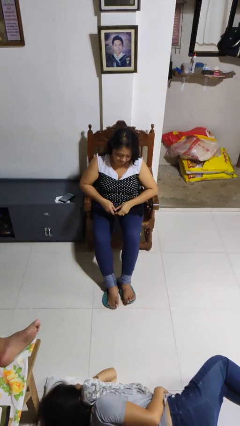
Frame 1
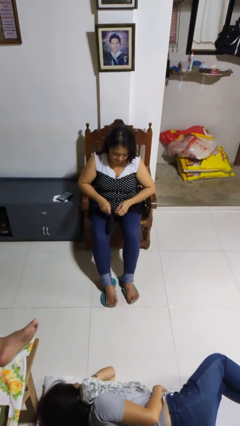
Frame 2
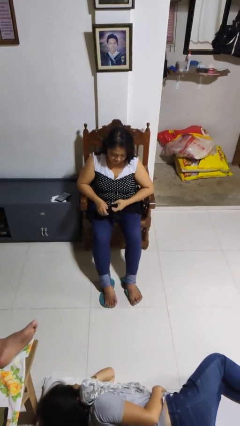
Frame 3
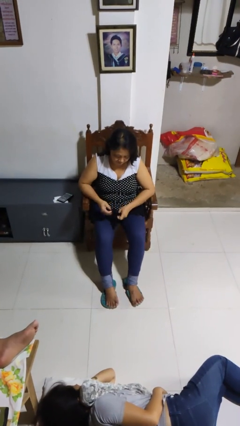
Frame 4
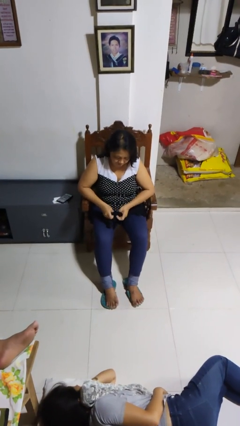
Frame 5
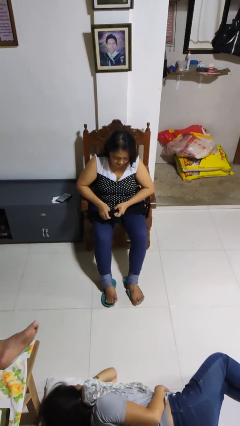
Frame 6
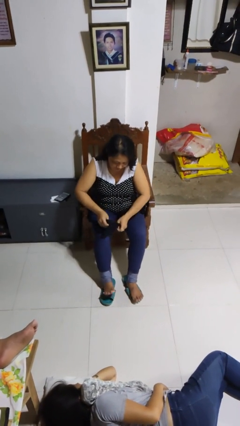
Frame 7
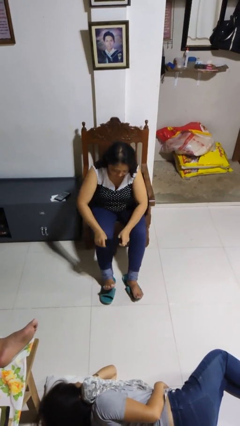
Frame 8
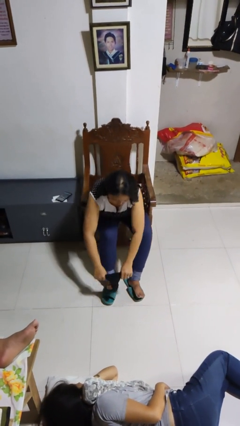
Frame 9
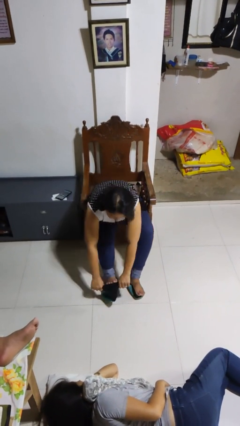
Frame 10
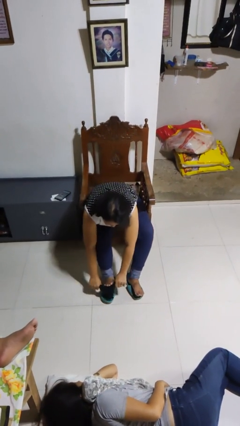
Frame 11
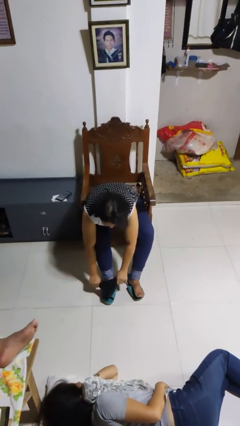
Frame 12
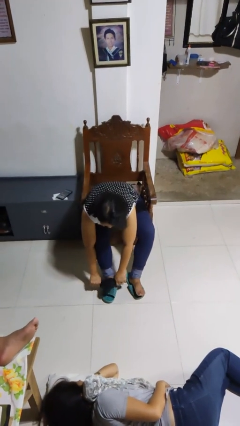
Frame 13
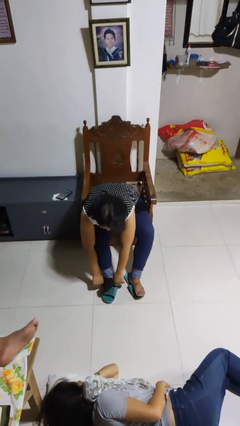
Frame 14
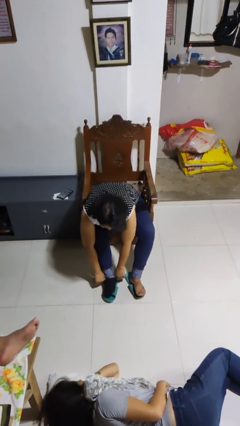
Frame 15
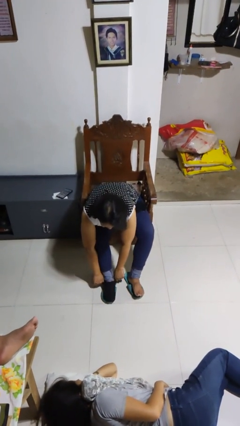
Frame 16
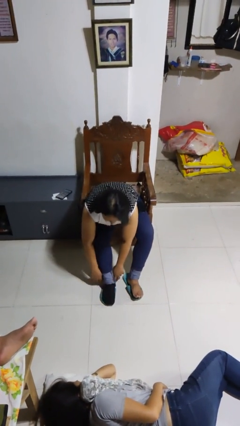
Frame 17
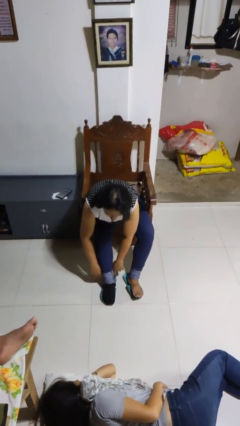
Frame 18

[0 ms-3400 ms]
person puts on socks

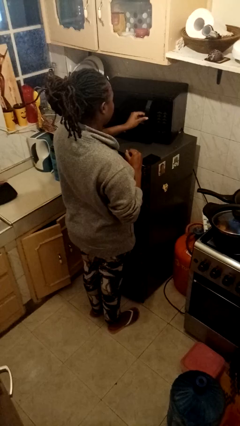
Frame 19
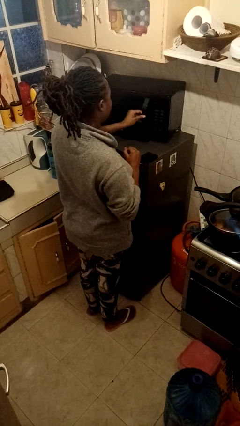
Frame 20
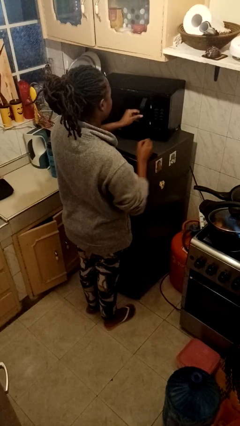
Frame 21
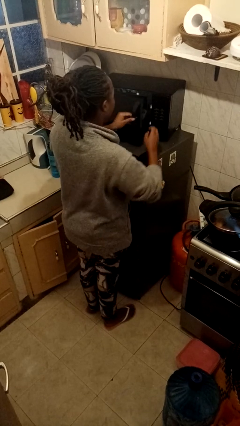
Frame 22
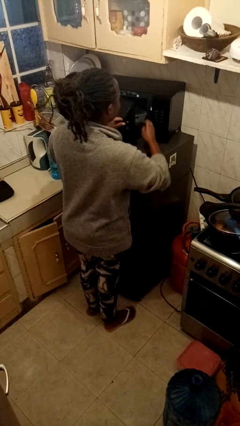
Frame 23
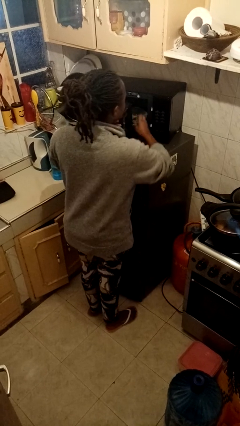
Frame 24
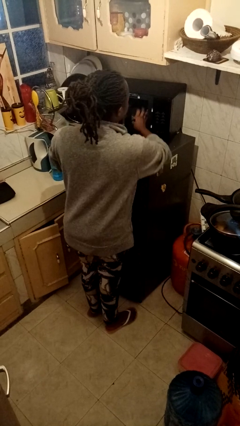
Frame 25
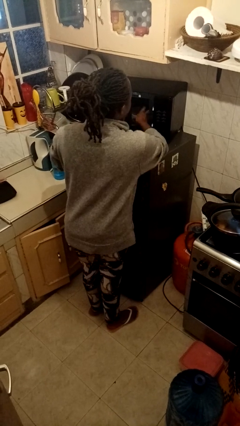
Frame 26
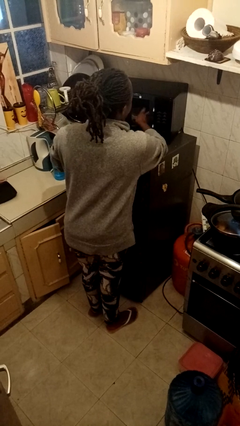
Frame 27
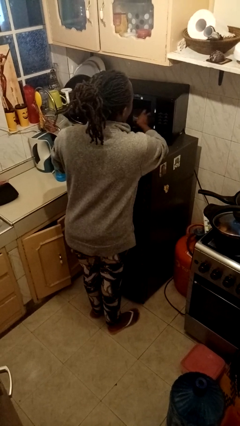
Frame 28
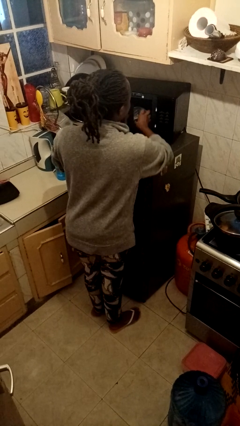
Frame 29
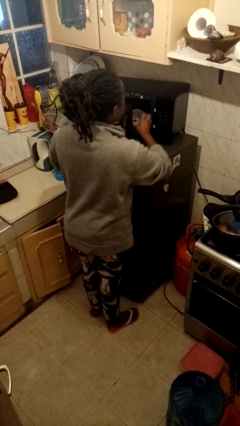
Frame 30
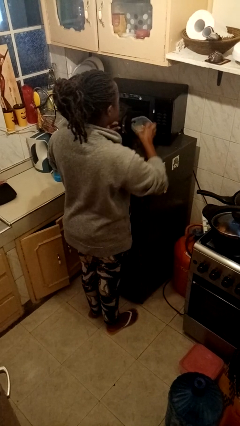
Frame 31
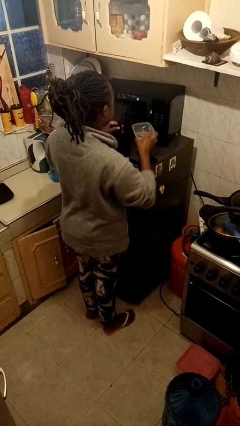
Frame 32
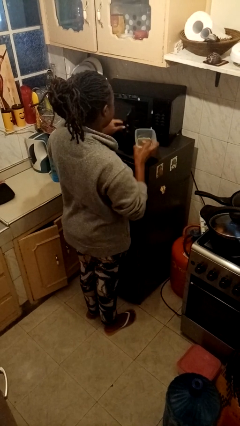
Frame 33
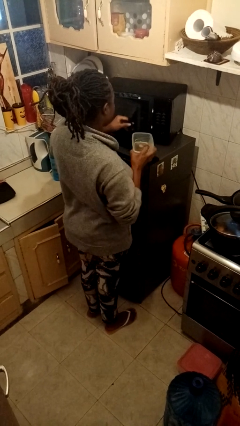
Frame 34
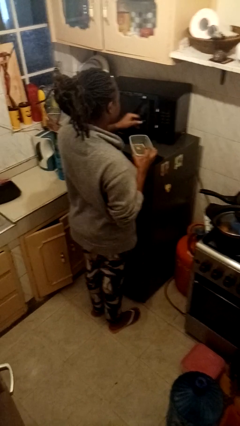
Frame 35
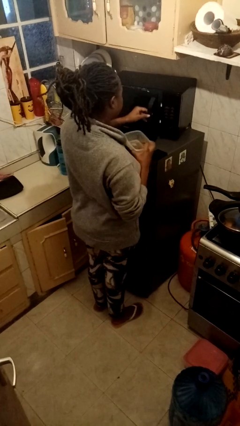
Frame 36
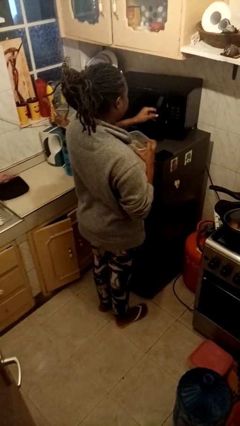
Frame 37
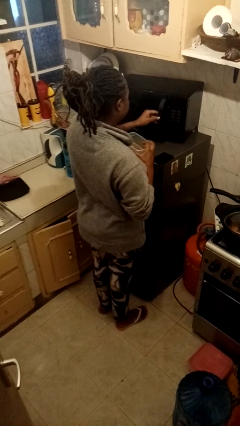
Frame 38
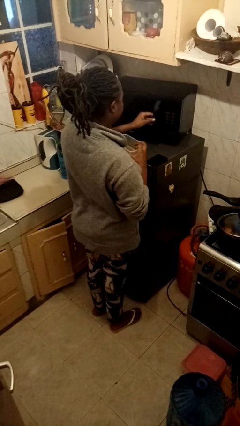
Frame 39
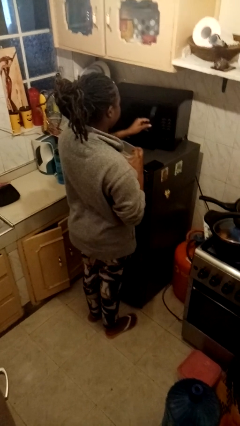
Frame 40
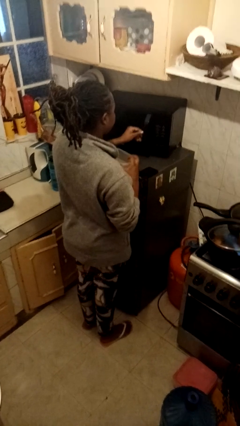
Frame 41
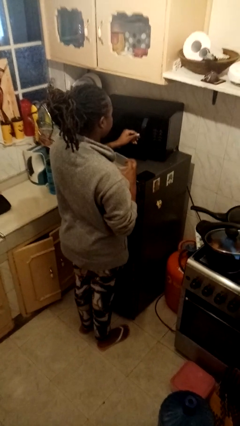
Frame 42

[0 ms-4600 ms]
person takes object from microwave

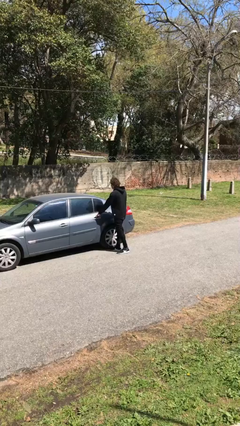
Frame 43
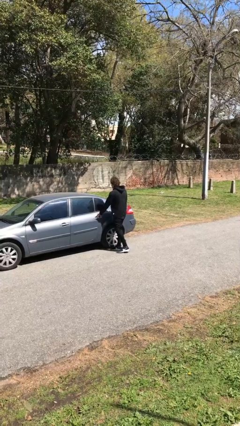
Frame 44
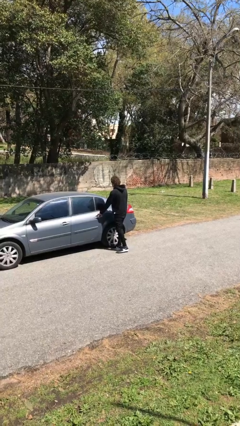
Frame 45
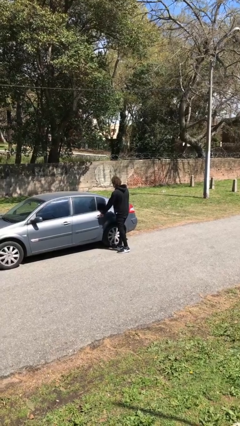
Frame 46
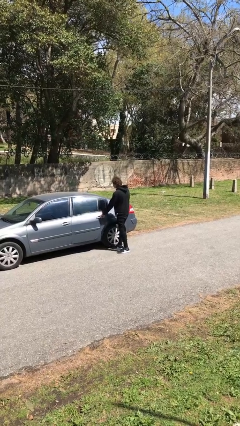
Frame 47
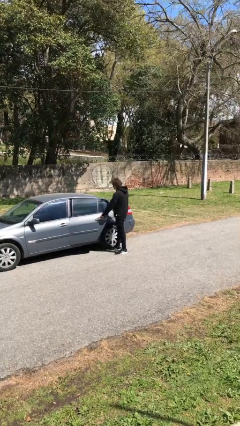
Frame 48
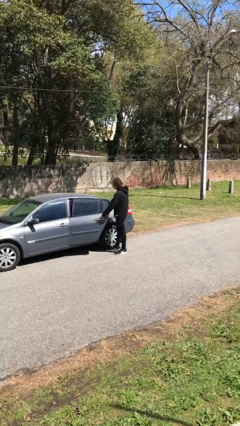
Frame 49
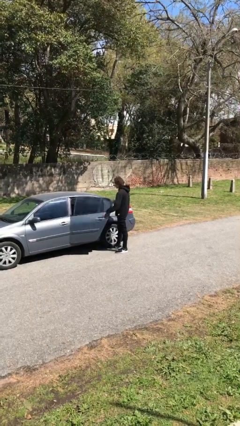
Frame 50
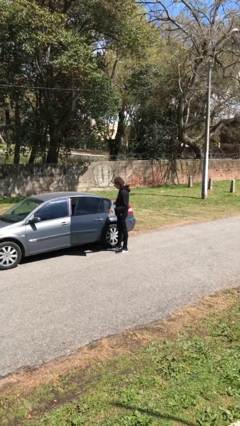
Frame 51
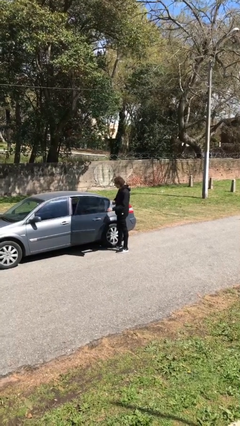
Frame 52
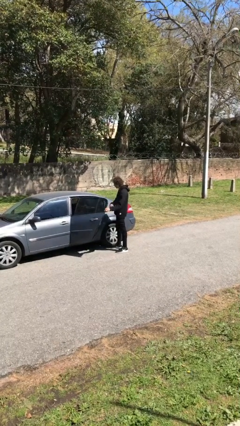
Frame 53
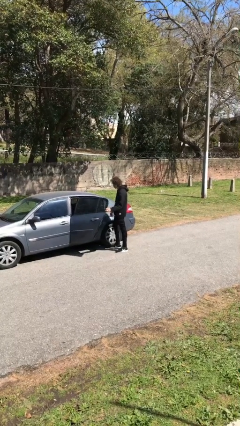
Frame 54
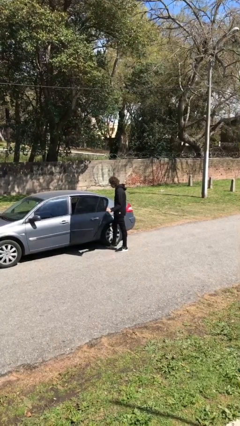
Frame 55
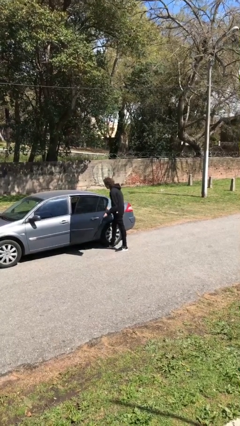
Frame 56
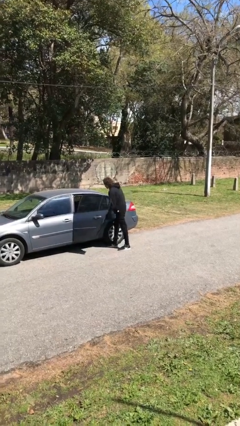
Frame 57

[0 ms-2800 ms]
person opens car door

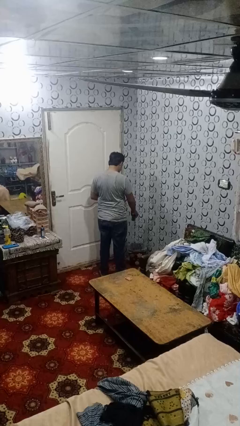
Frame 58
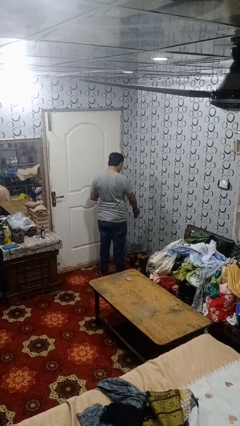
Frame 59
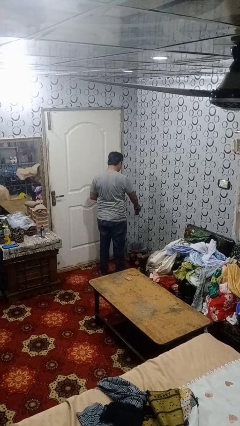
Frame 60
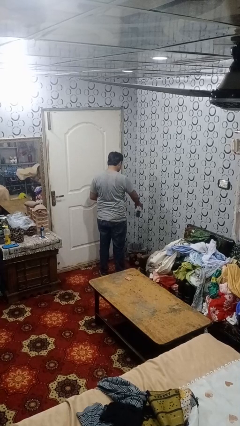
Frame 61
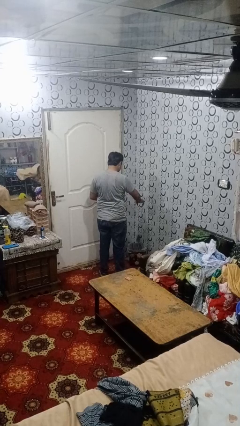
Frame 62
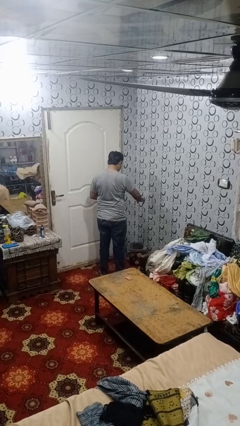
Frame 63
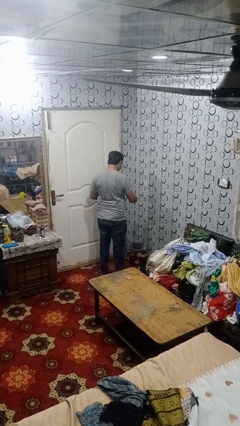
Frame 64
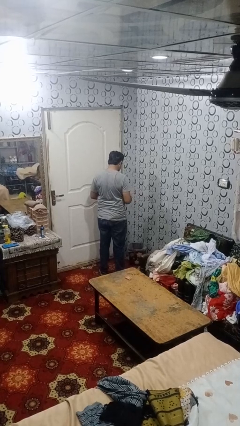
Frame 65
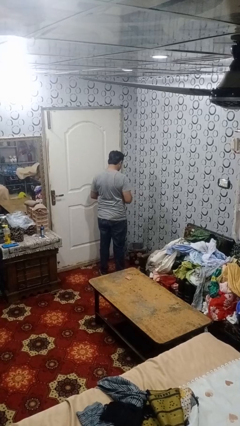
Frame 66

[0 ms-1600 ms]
person discards trash

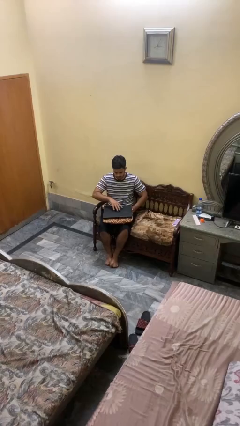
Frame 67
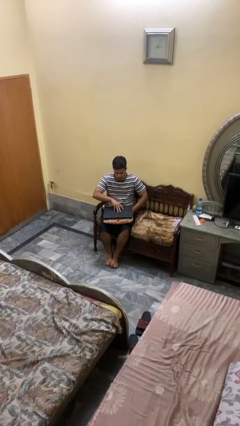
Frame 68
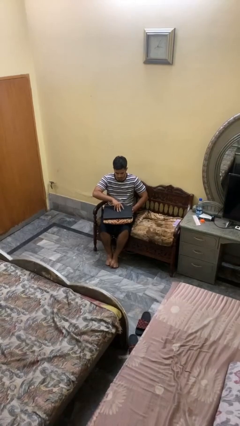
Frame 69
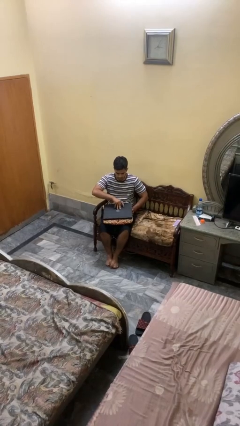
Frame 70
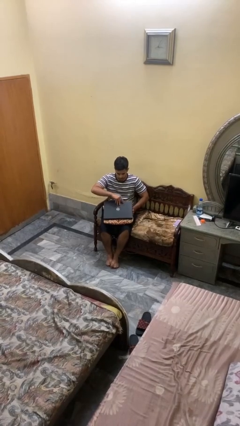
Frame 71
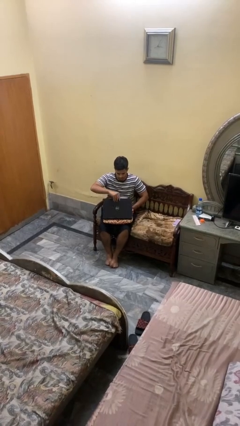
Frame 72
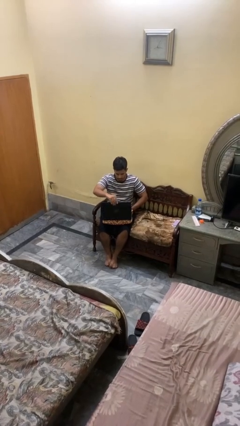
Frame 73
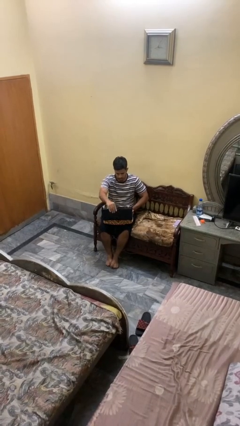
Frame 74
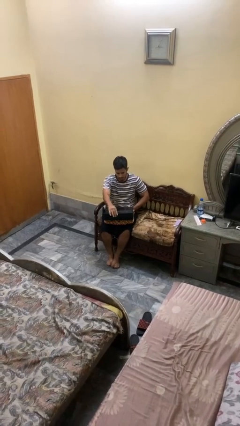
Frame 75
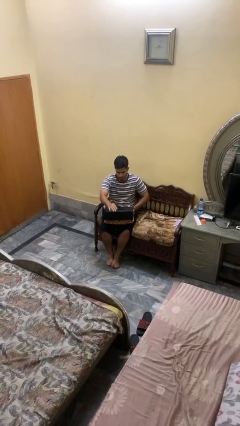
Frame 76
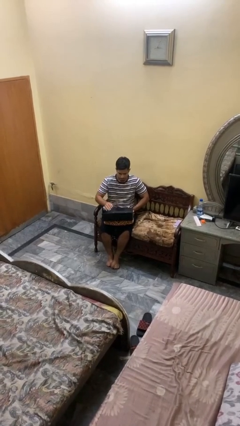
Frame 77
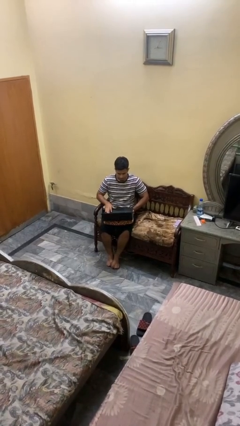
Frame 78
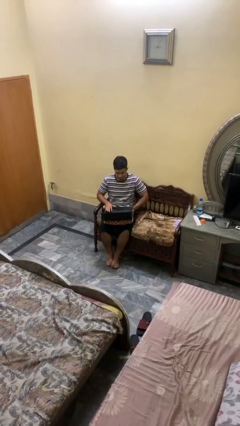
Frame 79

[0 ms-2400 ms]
person opens laptop

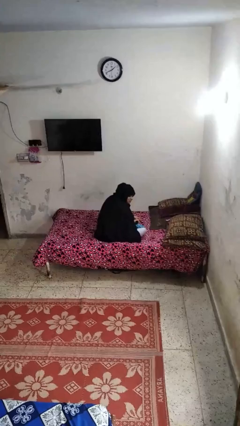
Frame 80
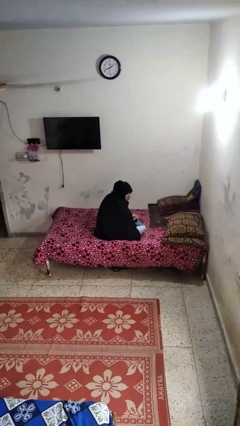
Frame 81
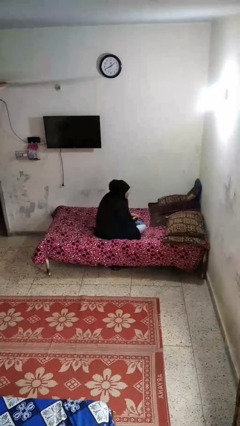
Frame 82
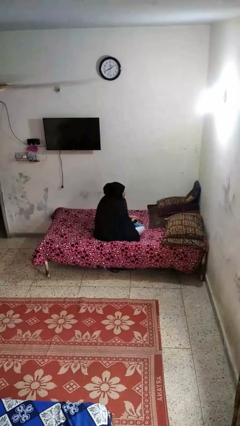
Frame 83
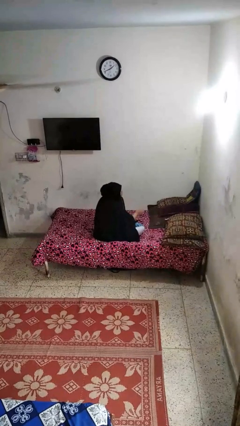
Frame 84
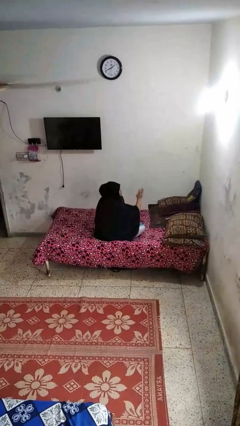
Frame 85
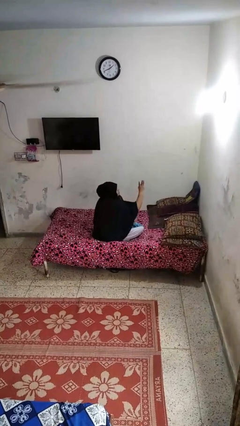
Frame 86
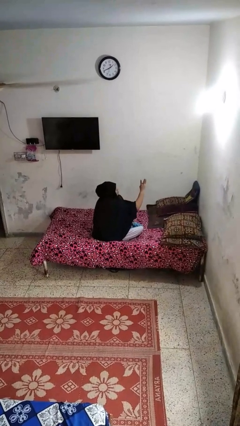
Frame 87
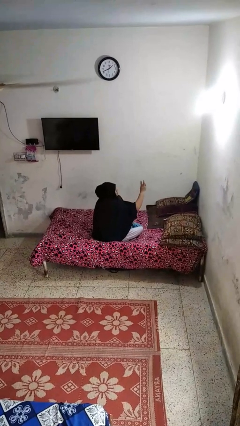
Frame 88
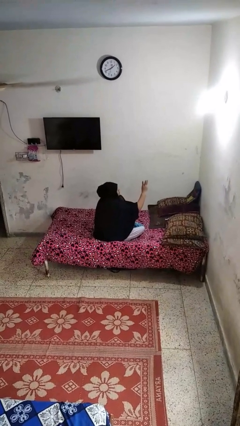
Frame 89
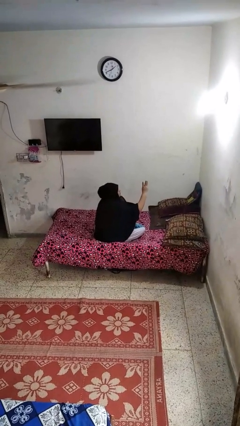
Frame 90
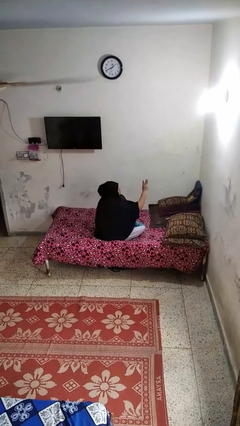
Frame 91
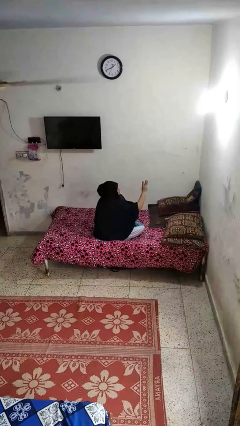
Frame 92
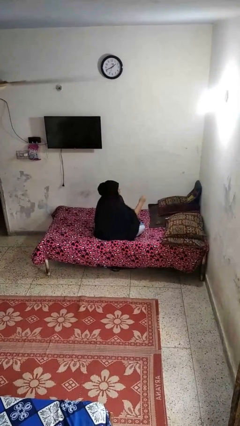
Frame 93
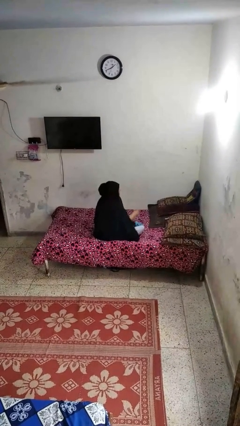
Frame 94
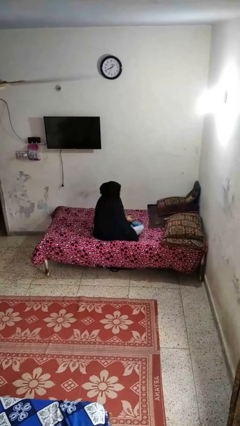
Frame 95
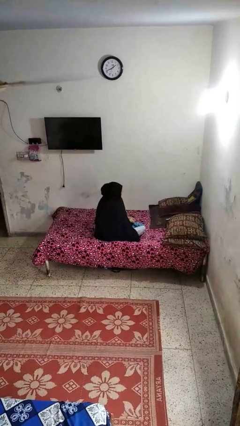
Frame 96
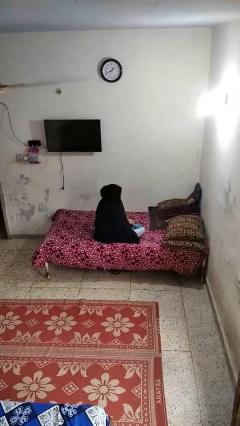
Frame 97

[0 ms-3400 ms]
person gestures number three
